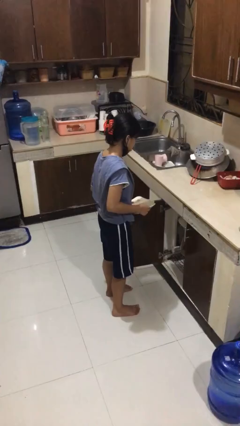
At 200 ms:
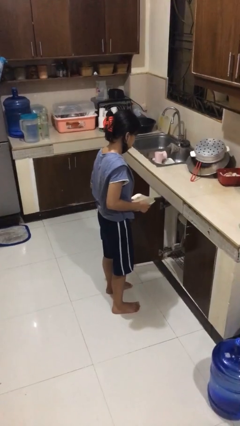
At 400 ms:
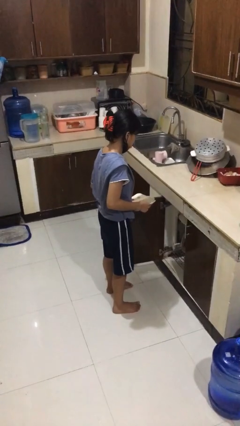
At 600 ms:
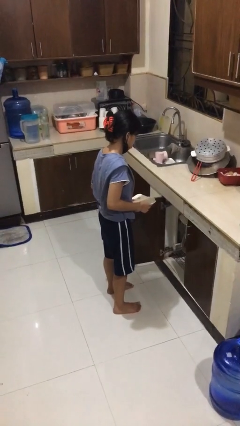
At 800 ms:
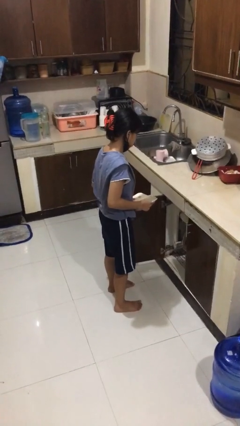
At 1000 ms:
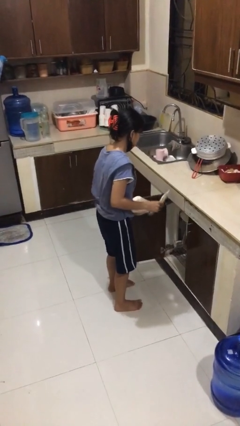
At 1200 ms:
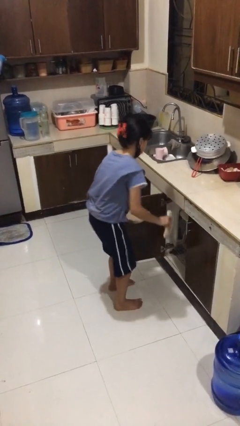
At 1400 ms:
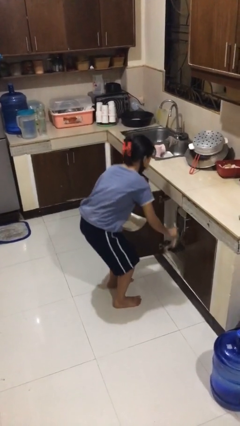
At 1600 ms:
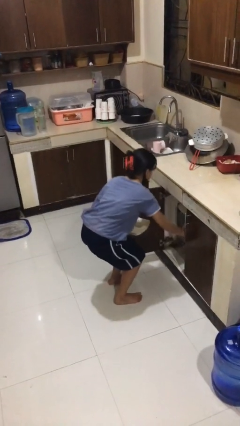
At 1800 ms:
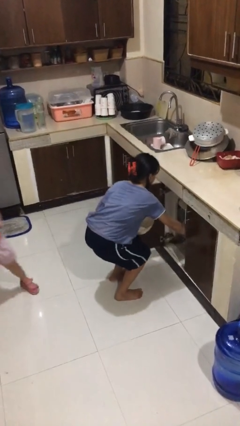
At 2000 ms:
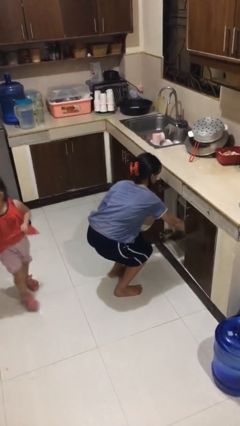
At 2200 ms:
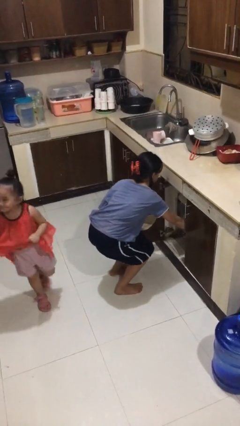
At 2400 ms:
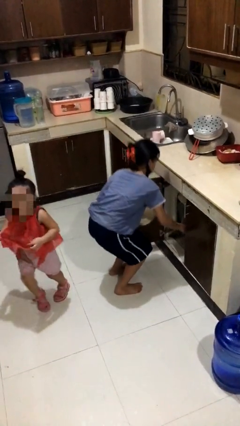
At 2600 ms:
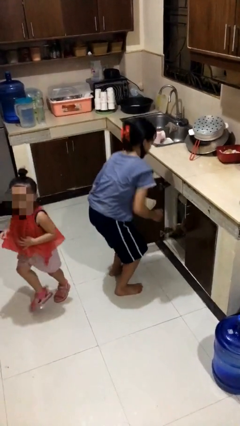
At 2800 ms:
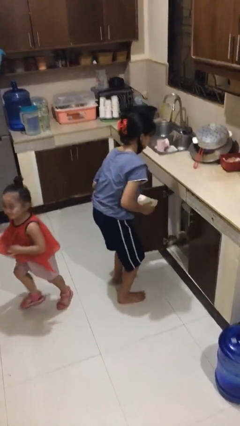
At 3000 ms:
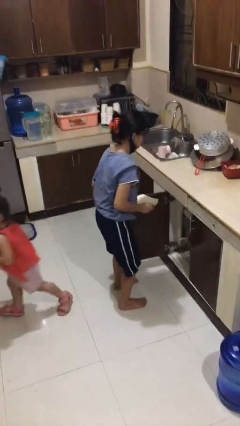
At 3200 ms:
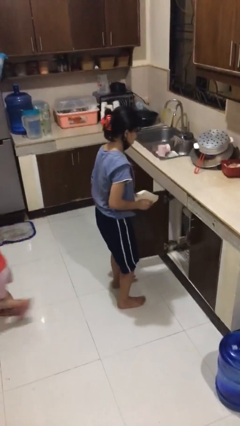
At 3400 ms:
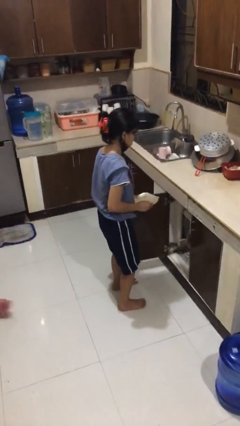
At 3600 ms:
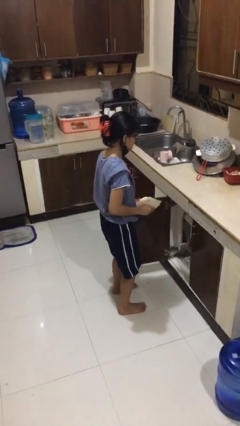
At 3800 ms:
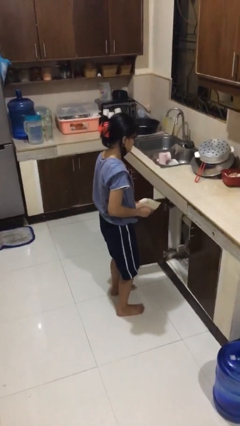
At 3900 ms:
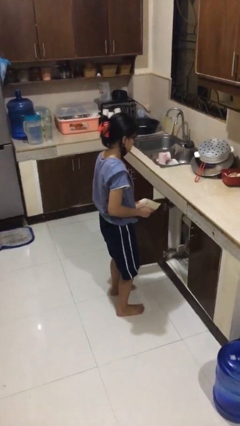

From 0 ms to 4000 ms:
person loads dishwasher

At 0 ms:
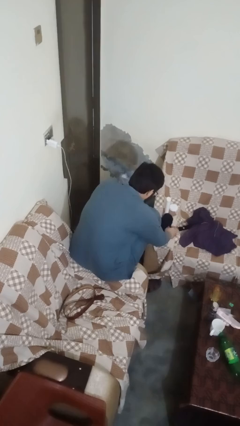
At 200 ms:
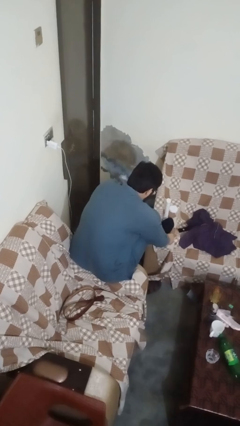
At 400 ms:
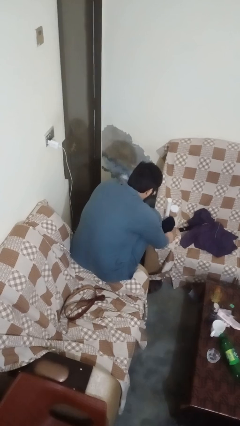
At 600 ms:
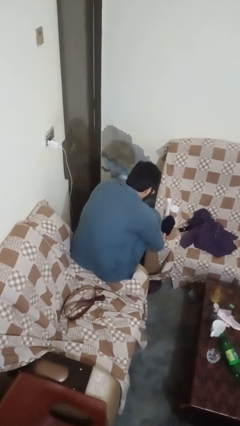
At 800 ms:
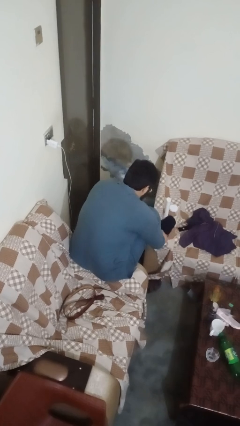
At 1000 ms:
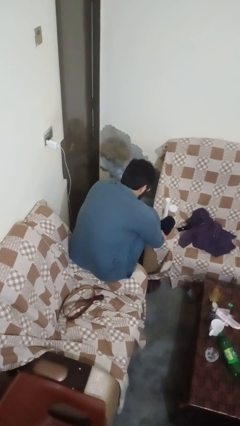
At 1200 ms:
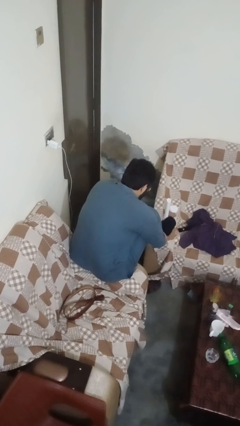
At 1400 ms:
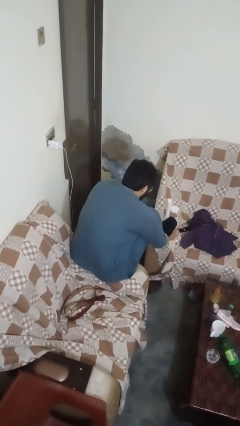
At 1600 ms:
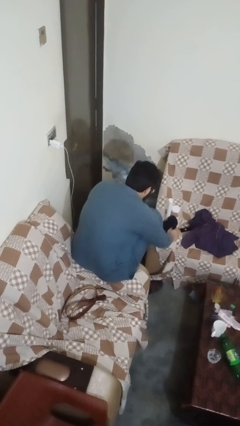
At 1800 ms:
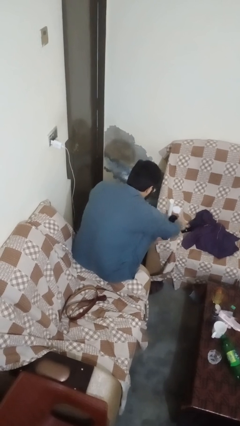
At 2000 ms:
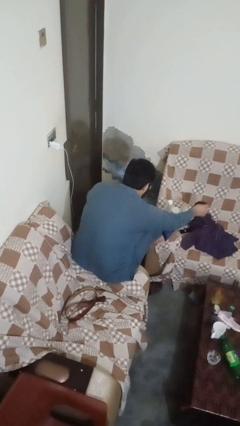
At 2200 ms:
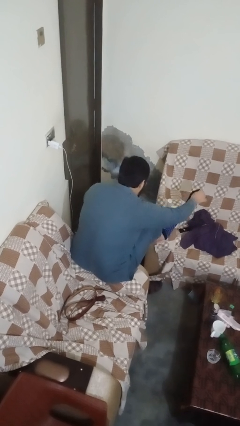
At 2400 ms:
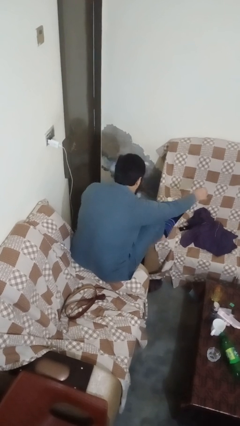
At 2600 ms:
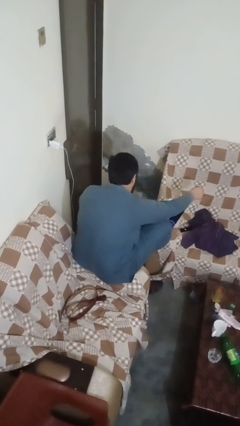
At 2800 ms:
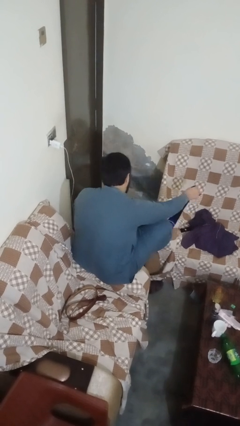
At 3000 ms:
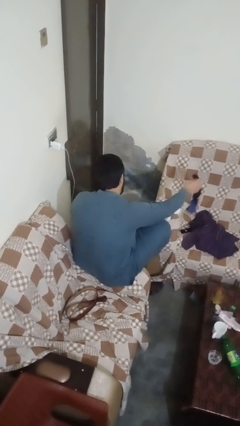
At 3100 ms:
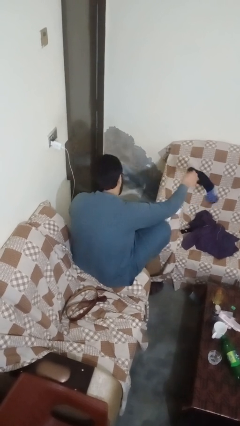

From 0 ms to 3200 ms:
person takes off socks

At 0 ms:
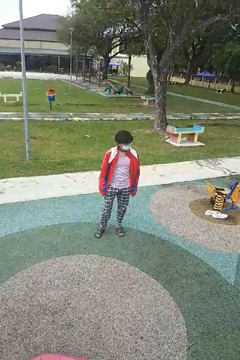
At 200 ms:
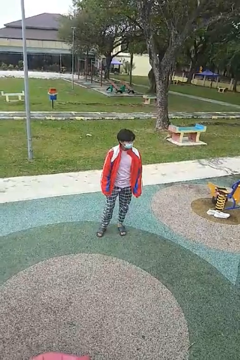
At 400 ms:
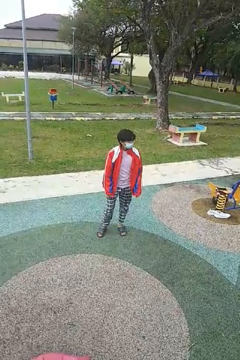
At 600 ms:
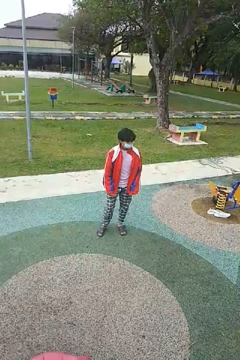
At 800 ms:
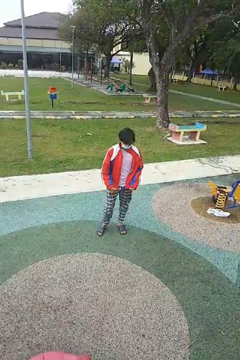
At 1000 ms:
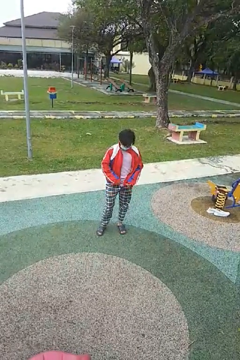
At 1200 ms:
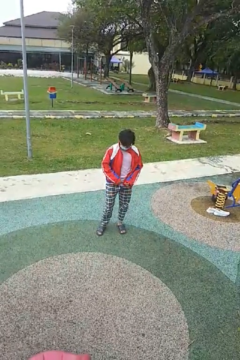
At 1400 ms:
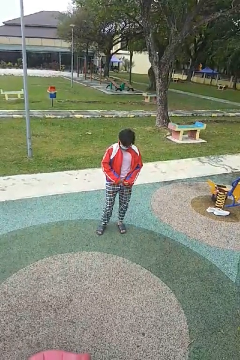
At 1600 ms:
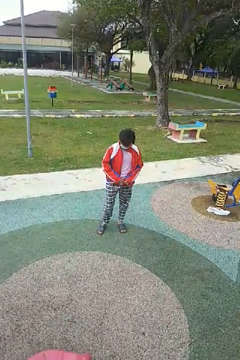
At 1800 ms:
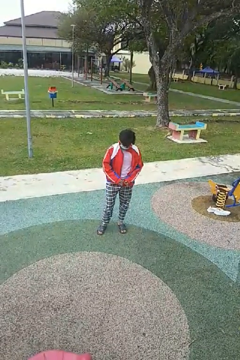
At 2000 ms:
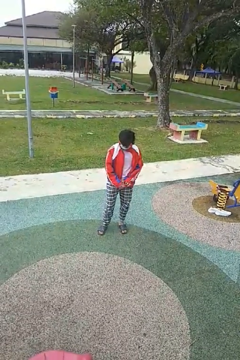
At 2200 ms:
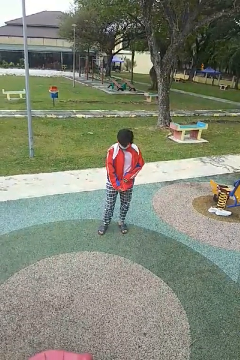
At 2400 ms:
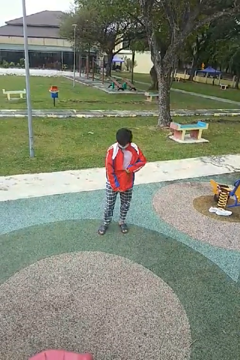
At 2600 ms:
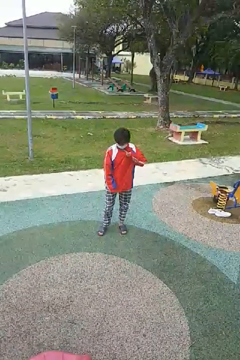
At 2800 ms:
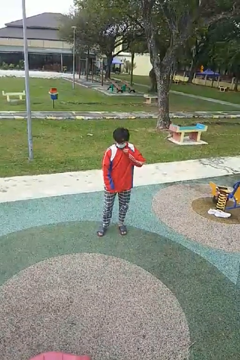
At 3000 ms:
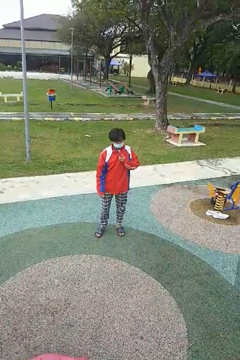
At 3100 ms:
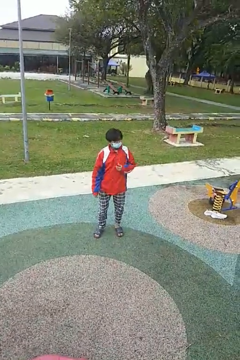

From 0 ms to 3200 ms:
person zips up jacket

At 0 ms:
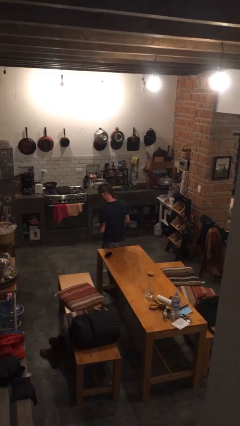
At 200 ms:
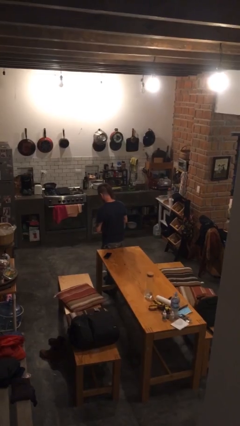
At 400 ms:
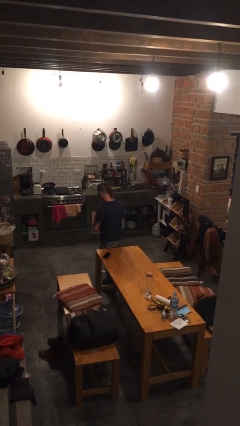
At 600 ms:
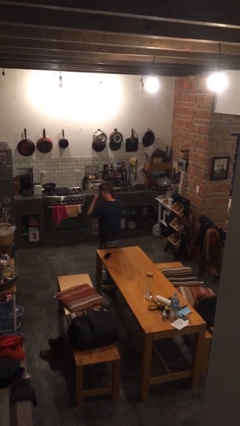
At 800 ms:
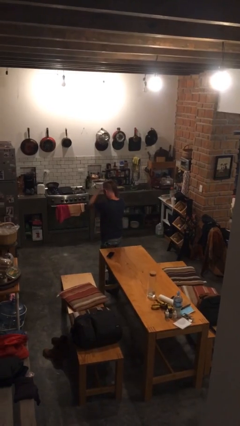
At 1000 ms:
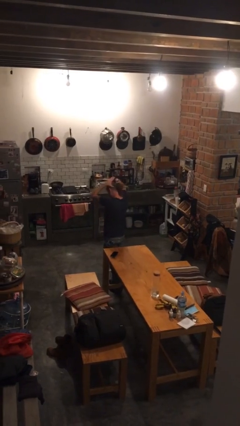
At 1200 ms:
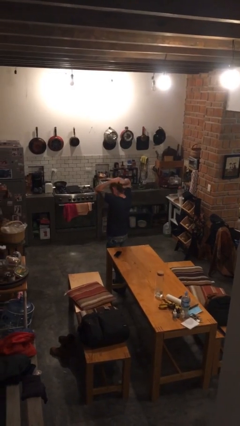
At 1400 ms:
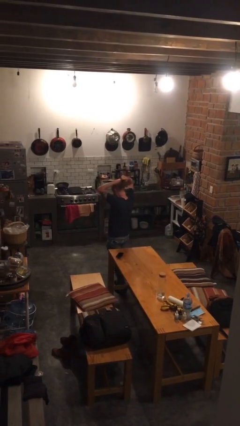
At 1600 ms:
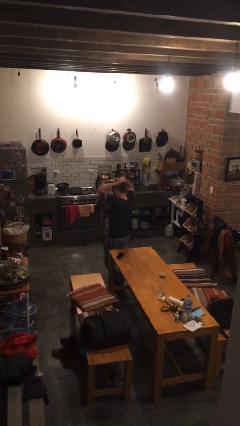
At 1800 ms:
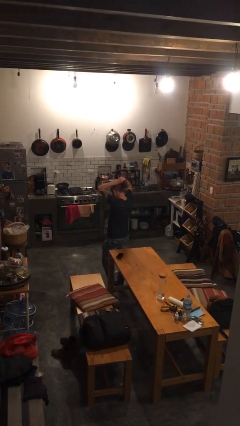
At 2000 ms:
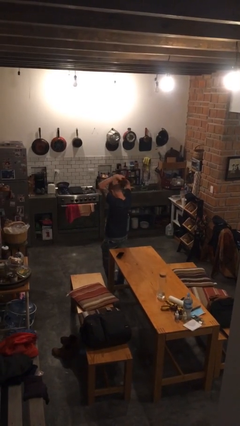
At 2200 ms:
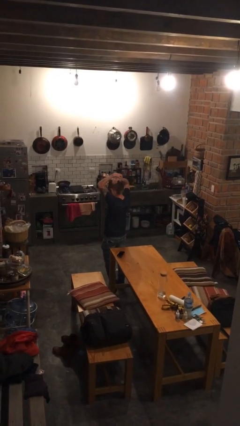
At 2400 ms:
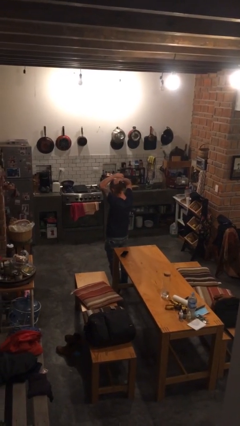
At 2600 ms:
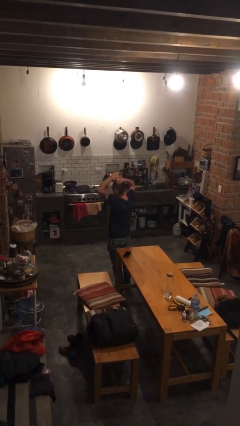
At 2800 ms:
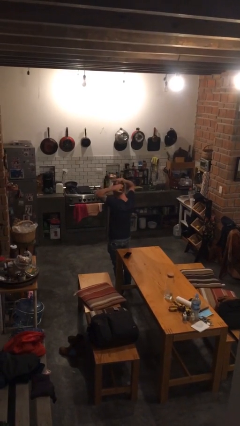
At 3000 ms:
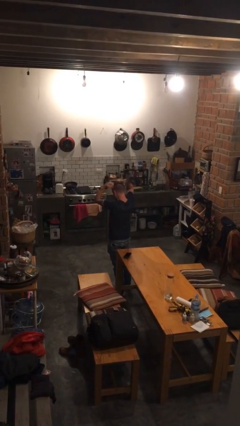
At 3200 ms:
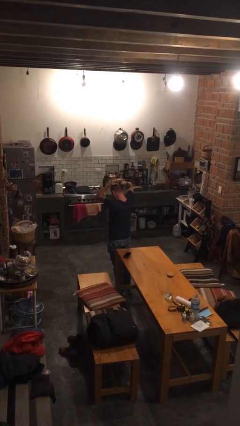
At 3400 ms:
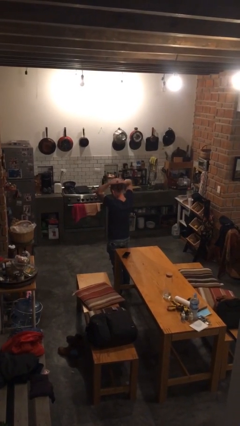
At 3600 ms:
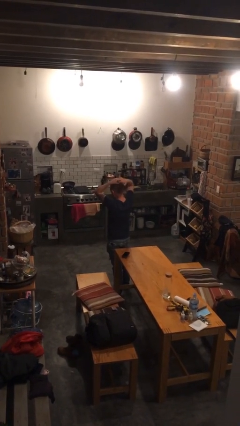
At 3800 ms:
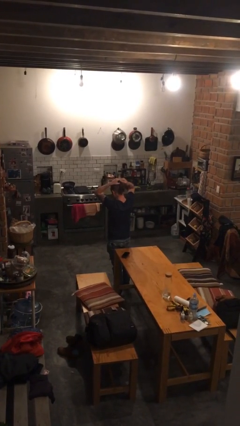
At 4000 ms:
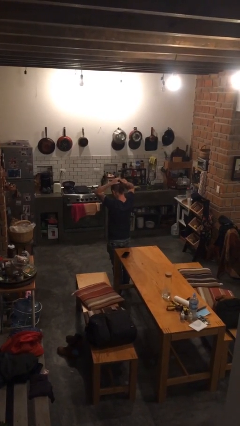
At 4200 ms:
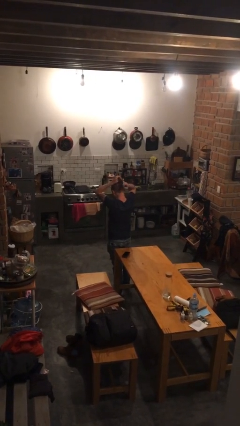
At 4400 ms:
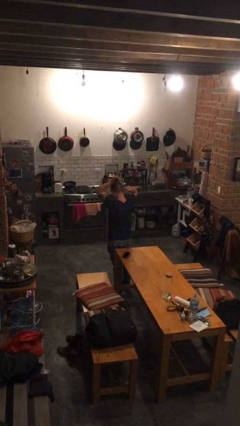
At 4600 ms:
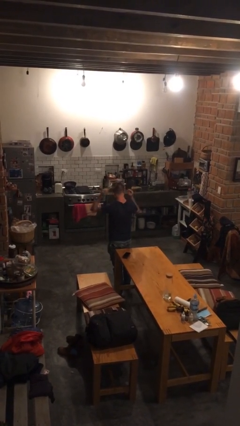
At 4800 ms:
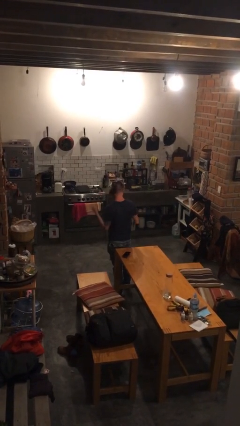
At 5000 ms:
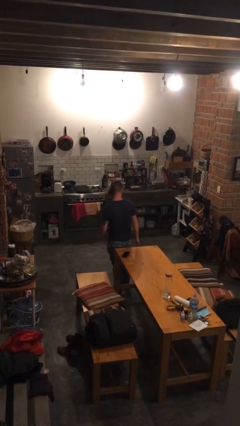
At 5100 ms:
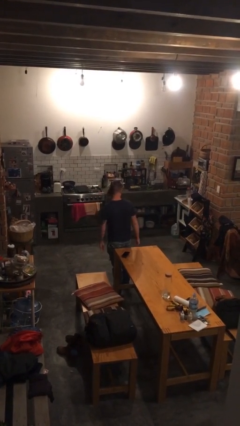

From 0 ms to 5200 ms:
person puts hair in ponytail

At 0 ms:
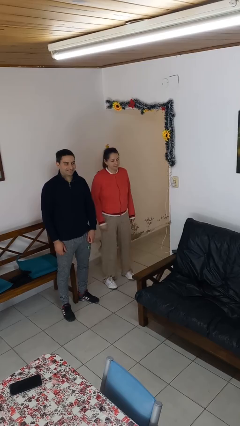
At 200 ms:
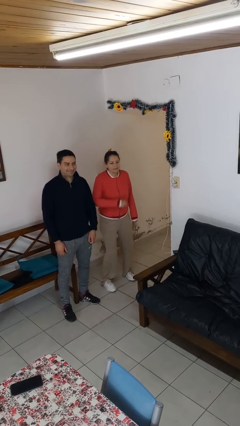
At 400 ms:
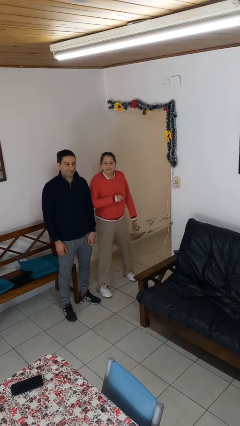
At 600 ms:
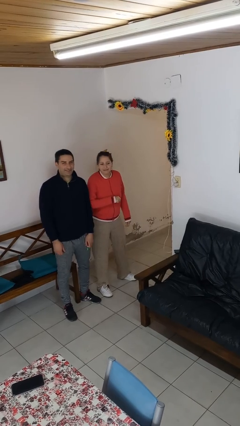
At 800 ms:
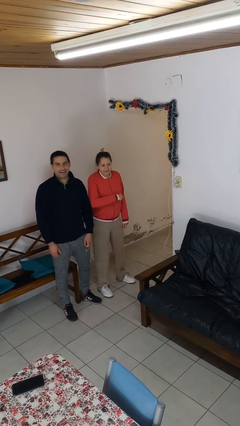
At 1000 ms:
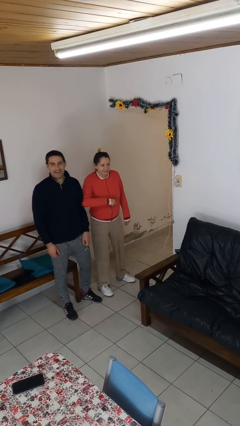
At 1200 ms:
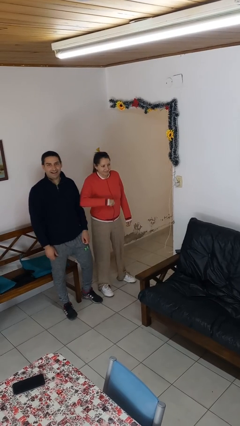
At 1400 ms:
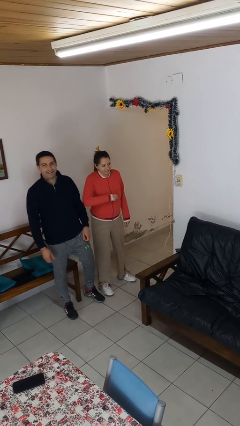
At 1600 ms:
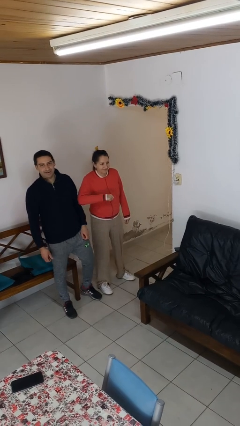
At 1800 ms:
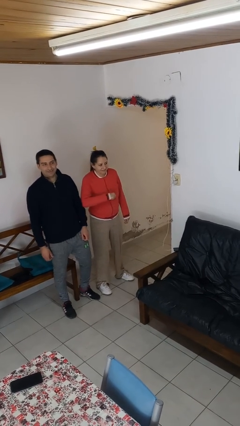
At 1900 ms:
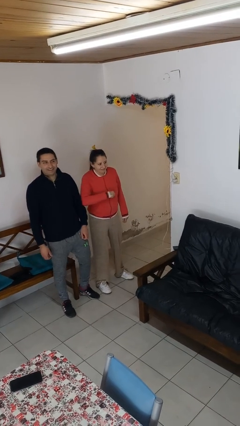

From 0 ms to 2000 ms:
person nudges person with elbow

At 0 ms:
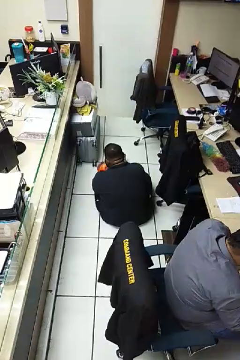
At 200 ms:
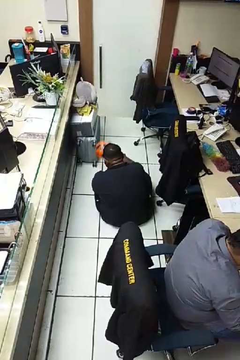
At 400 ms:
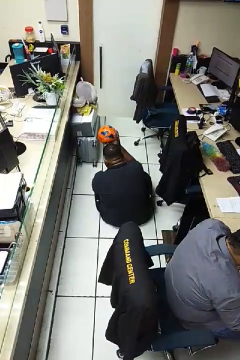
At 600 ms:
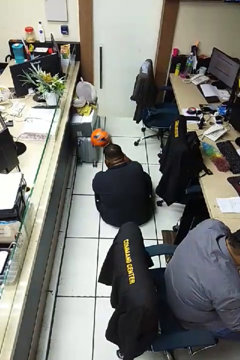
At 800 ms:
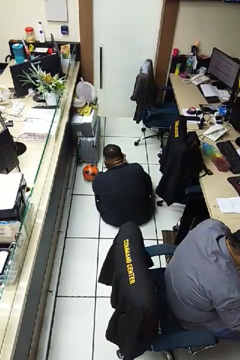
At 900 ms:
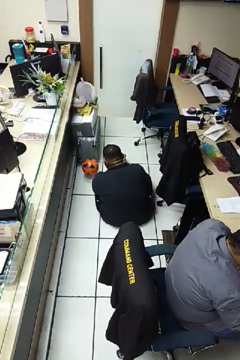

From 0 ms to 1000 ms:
person bounces ball on floor
